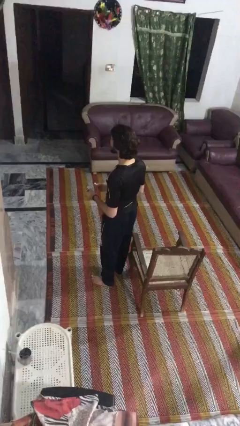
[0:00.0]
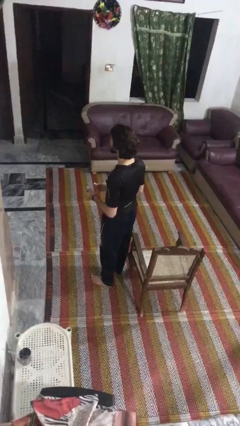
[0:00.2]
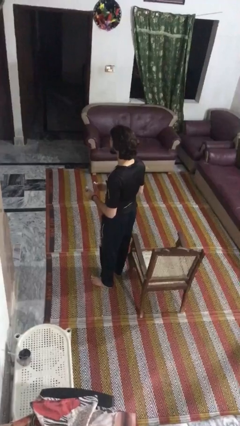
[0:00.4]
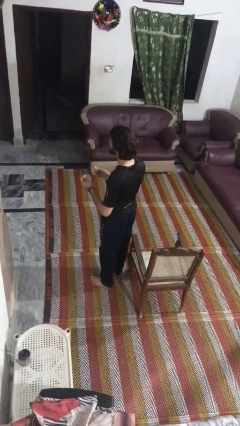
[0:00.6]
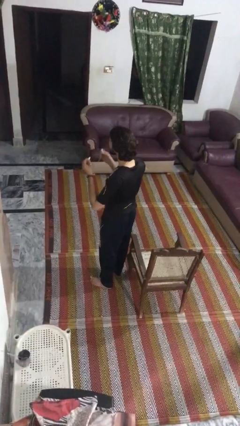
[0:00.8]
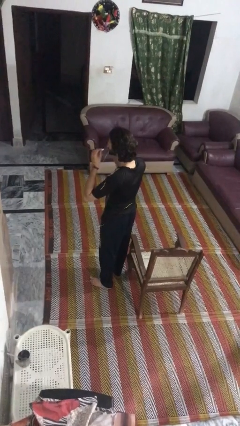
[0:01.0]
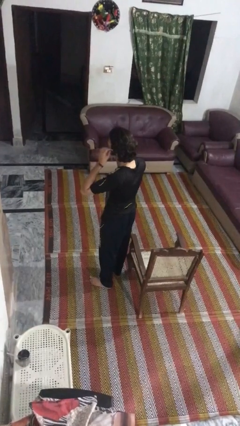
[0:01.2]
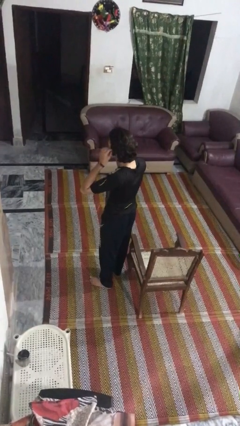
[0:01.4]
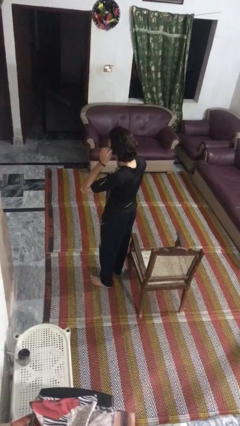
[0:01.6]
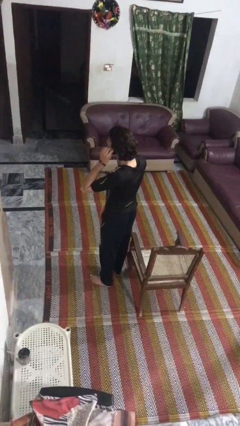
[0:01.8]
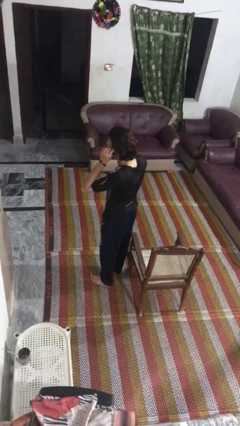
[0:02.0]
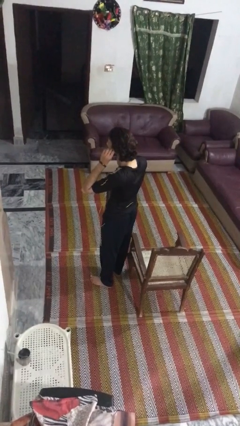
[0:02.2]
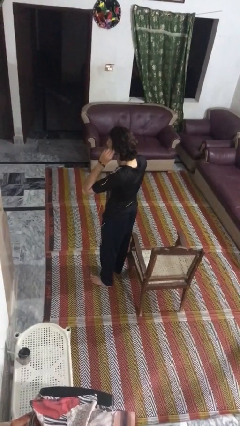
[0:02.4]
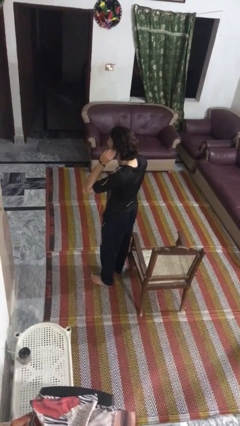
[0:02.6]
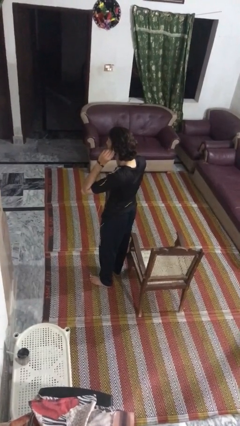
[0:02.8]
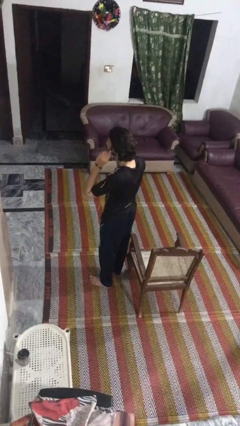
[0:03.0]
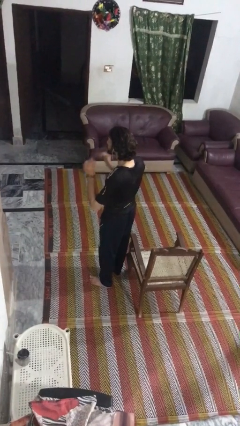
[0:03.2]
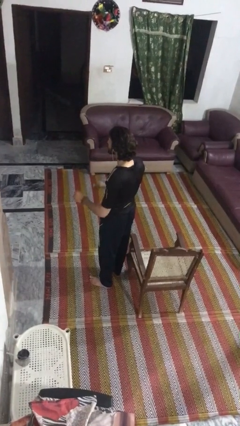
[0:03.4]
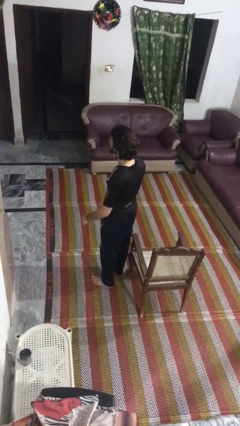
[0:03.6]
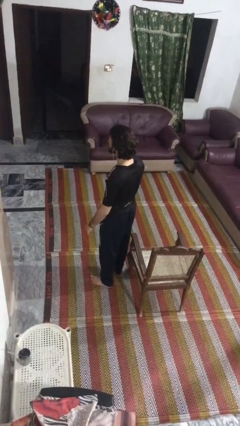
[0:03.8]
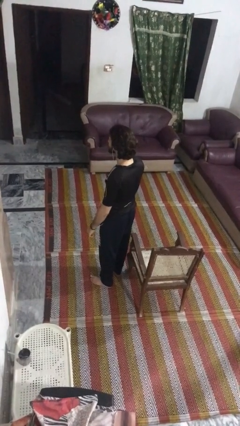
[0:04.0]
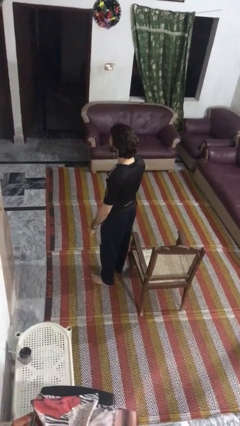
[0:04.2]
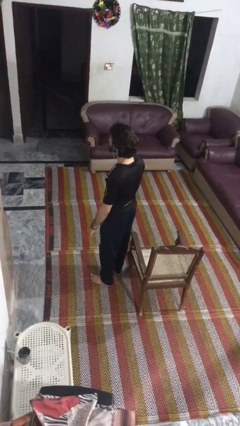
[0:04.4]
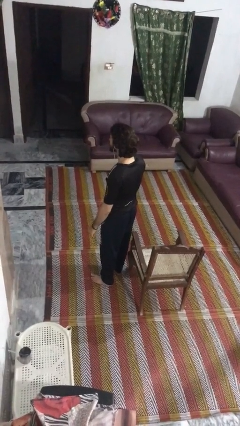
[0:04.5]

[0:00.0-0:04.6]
person puts on headphones

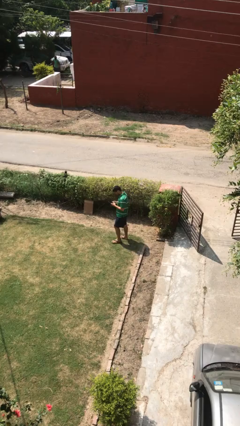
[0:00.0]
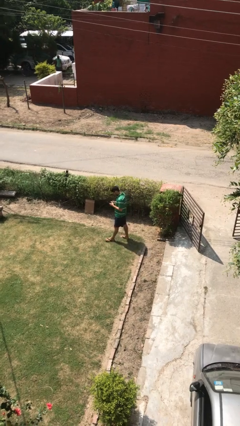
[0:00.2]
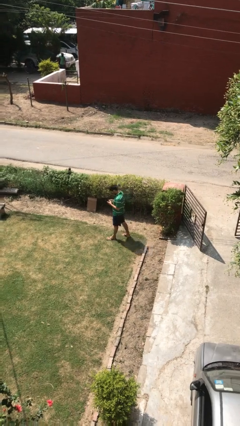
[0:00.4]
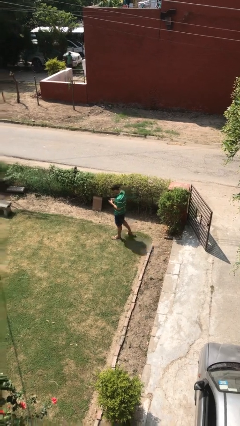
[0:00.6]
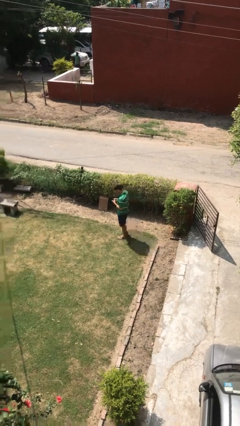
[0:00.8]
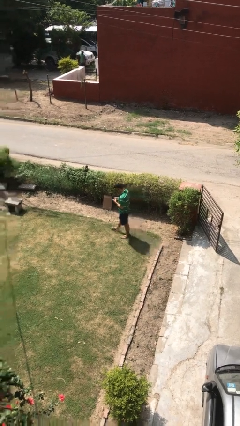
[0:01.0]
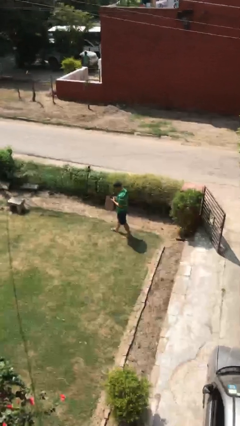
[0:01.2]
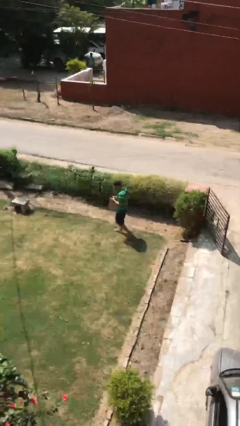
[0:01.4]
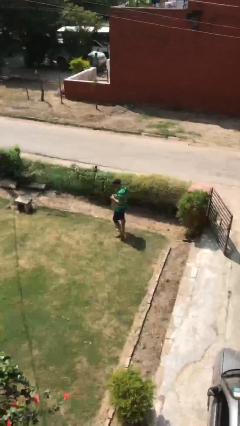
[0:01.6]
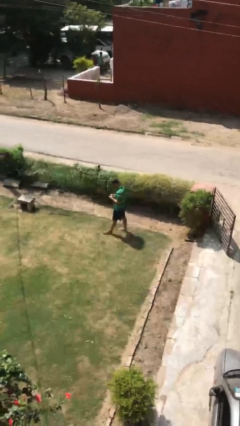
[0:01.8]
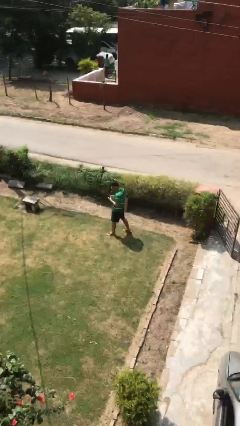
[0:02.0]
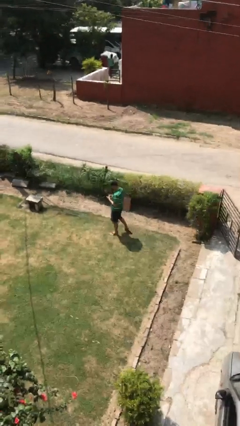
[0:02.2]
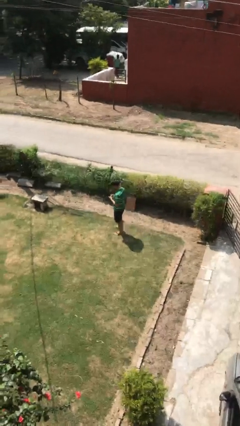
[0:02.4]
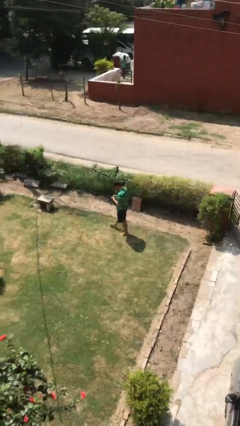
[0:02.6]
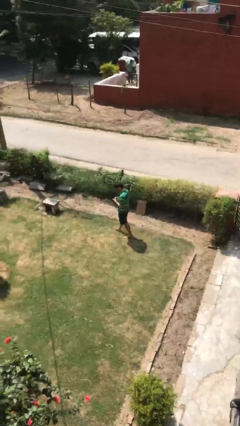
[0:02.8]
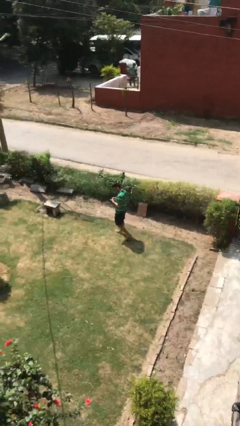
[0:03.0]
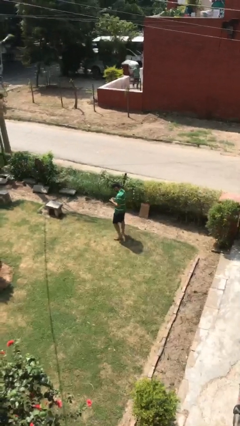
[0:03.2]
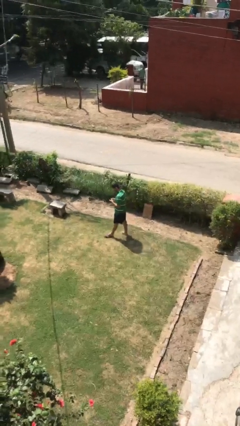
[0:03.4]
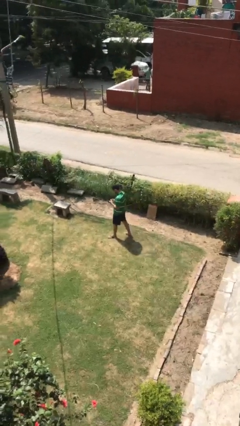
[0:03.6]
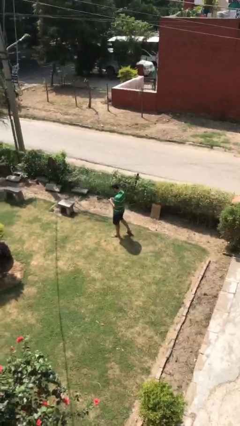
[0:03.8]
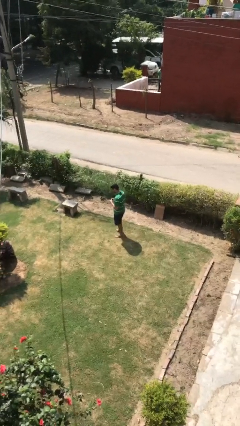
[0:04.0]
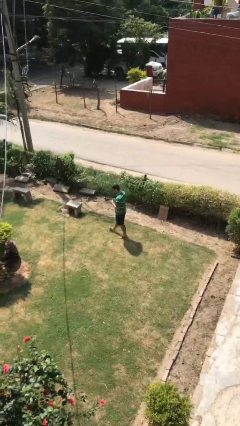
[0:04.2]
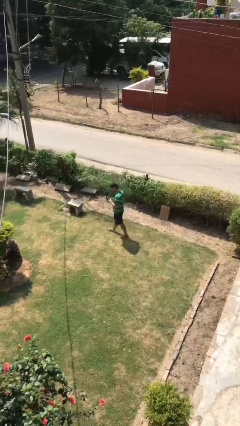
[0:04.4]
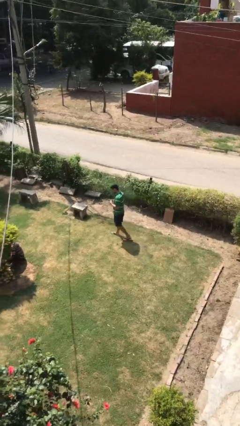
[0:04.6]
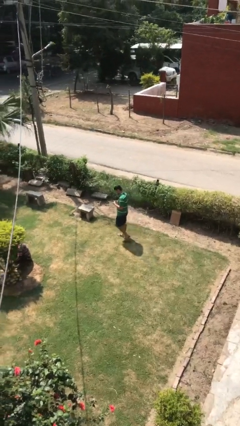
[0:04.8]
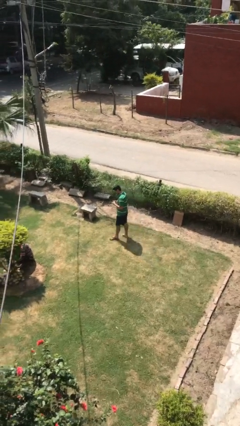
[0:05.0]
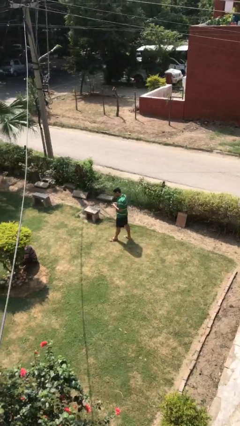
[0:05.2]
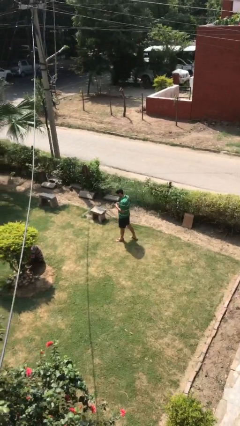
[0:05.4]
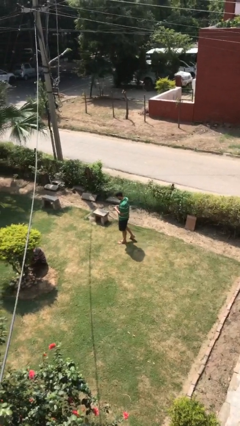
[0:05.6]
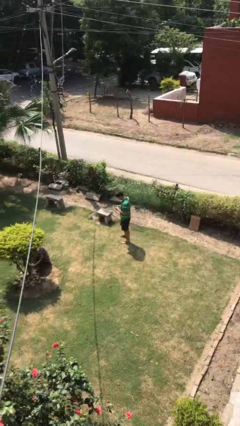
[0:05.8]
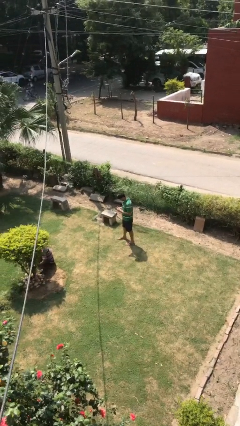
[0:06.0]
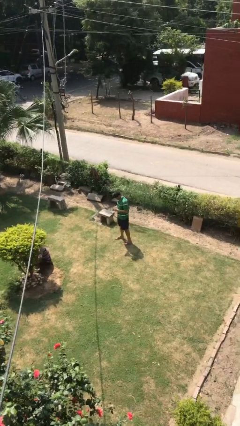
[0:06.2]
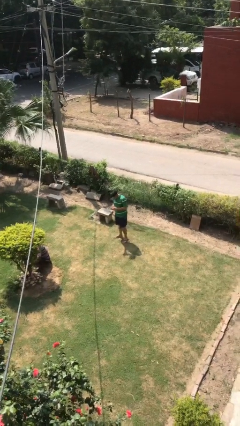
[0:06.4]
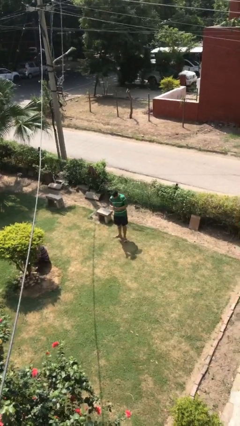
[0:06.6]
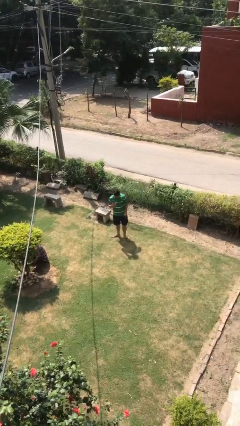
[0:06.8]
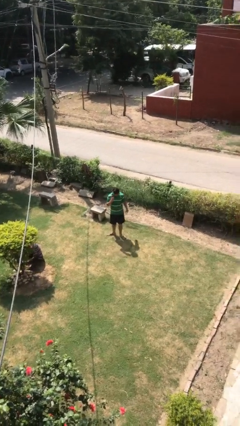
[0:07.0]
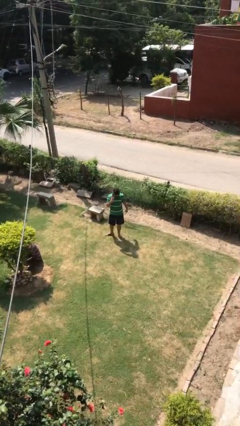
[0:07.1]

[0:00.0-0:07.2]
person texts on phone

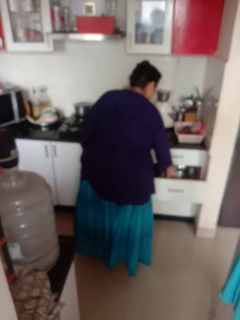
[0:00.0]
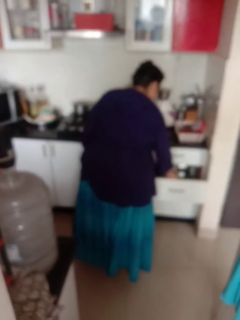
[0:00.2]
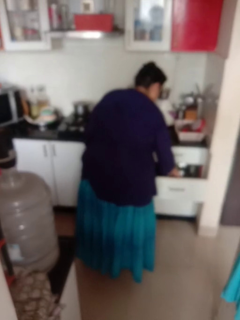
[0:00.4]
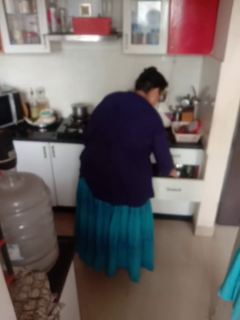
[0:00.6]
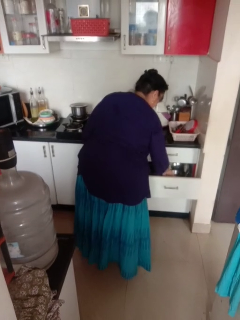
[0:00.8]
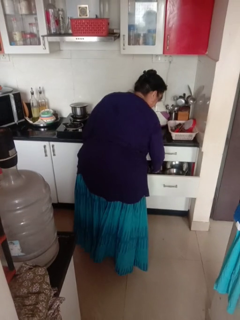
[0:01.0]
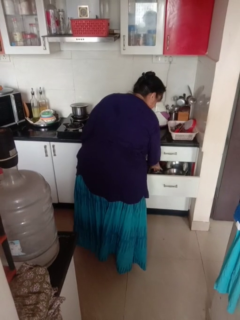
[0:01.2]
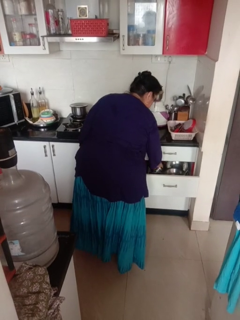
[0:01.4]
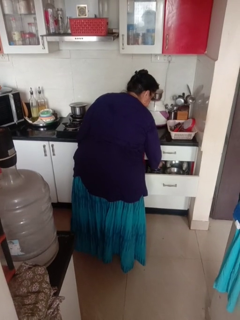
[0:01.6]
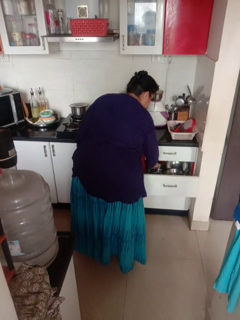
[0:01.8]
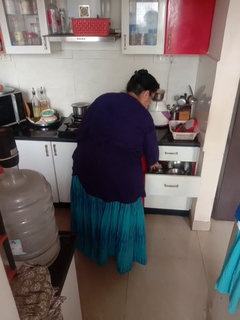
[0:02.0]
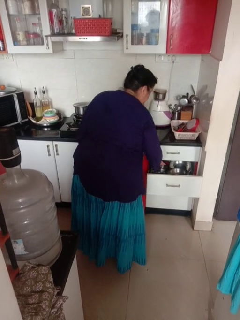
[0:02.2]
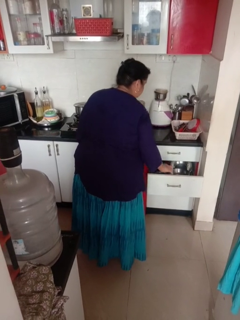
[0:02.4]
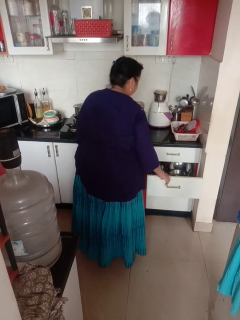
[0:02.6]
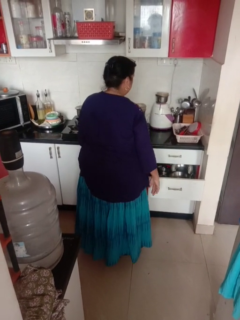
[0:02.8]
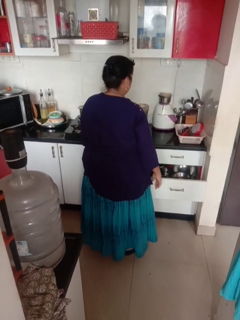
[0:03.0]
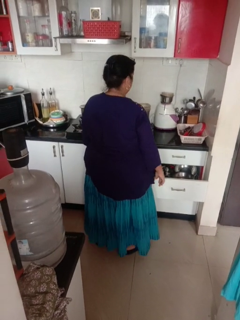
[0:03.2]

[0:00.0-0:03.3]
person searches in kitchen drawer

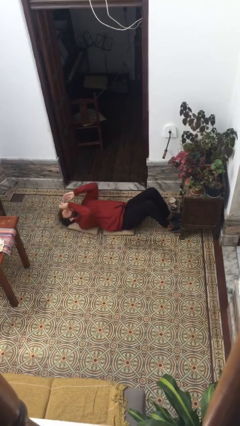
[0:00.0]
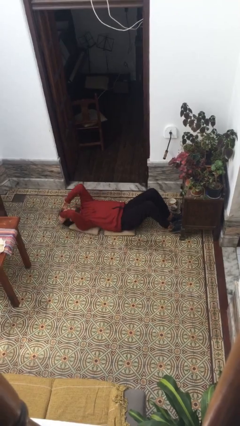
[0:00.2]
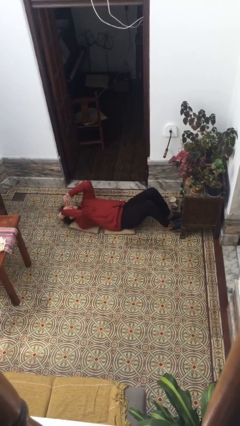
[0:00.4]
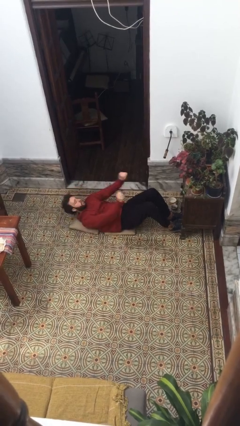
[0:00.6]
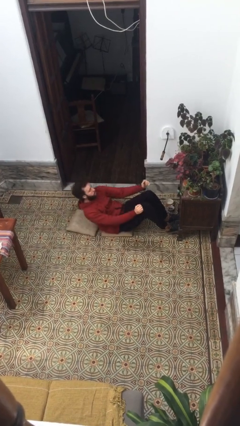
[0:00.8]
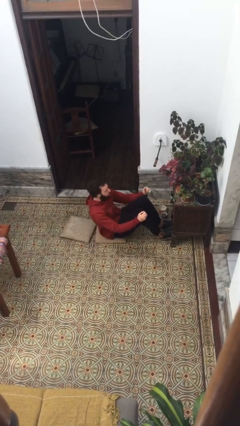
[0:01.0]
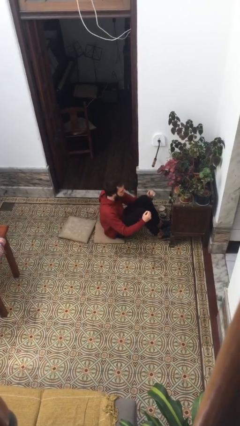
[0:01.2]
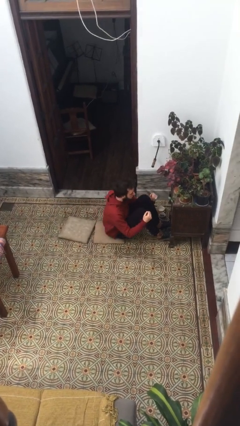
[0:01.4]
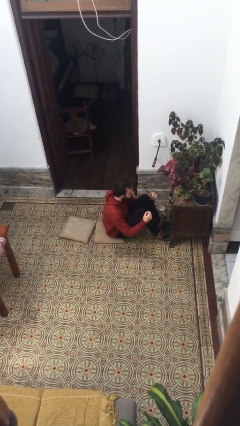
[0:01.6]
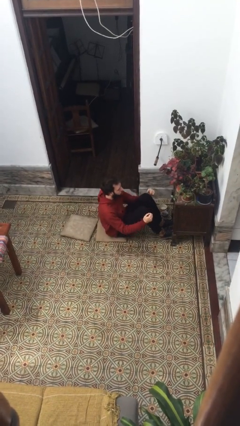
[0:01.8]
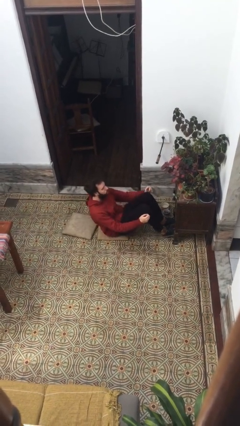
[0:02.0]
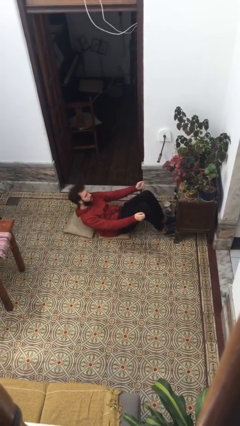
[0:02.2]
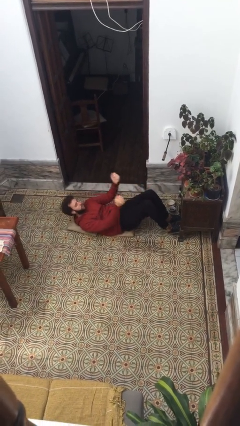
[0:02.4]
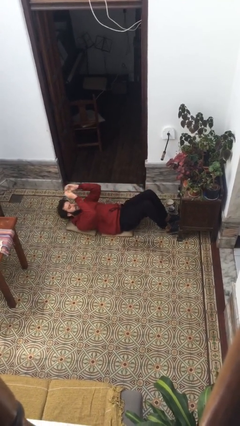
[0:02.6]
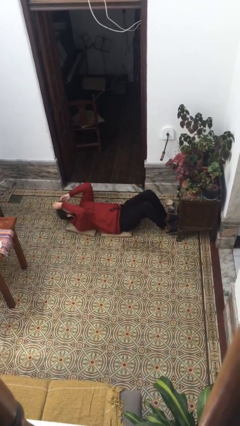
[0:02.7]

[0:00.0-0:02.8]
person exercises with situp

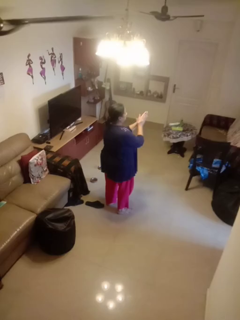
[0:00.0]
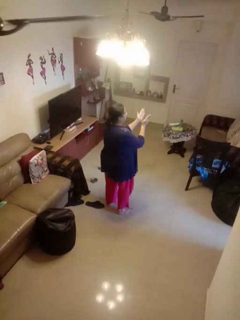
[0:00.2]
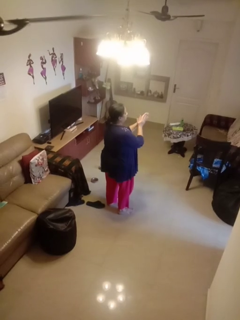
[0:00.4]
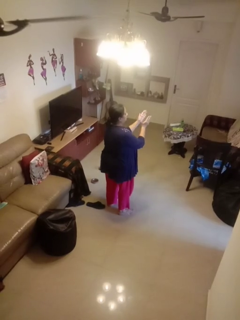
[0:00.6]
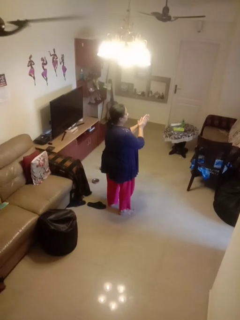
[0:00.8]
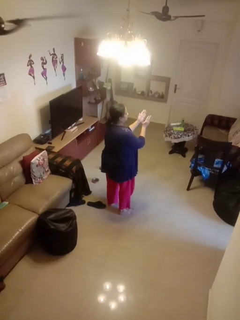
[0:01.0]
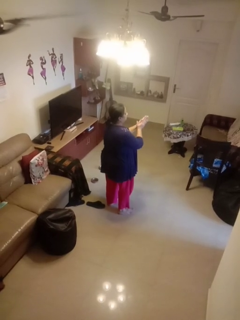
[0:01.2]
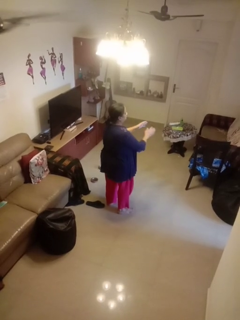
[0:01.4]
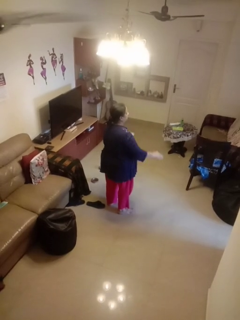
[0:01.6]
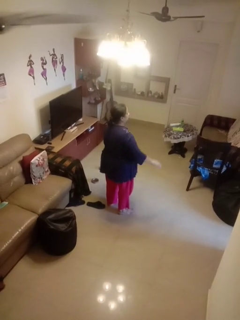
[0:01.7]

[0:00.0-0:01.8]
person claps hands
